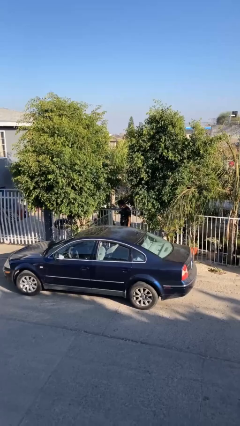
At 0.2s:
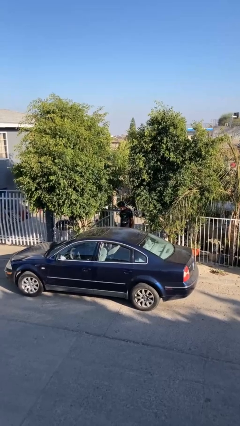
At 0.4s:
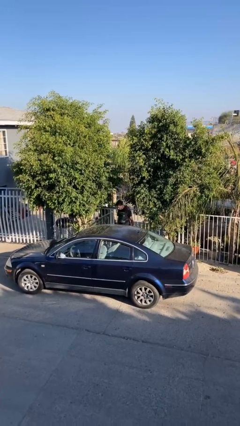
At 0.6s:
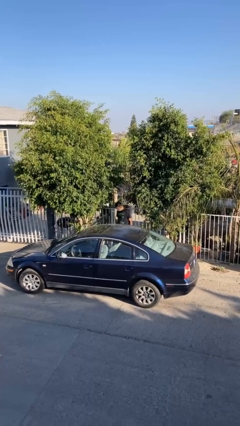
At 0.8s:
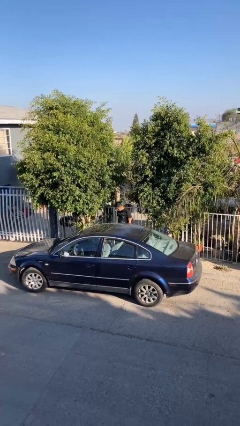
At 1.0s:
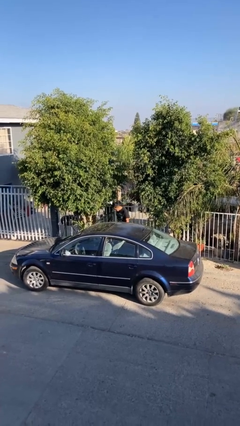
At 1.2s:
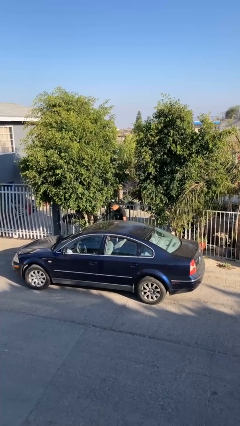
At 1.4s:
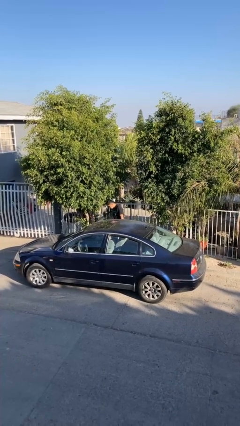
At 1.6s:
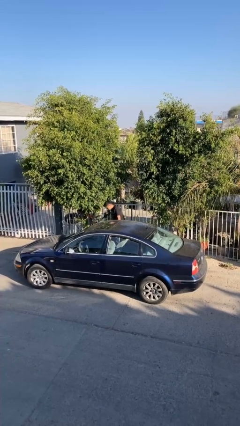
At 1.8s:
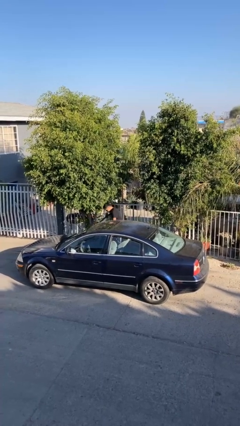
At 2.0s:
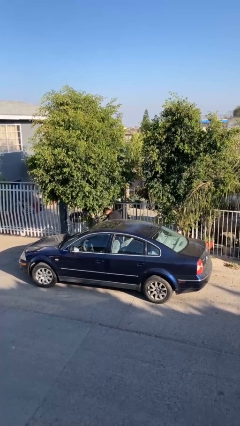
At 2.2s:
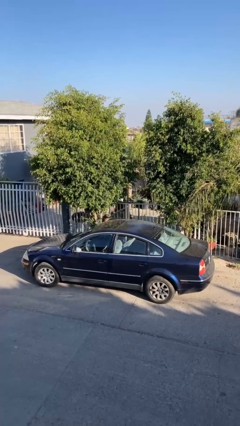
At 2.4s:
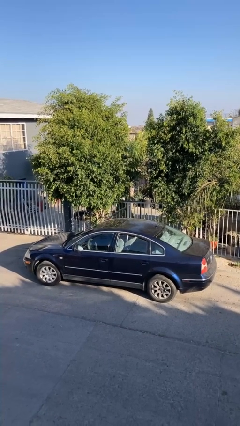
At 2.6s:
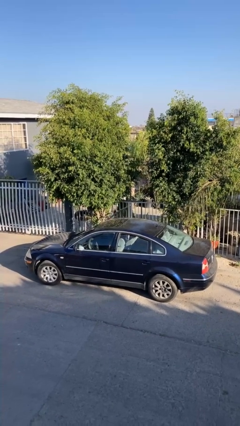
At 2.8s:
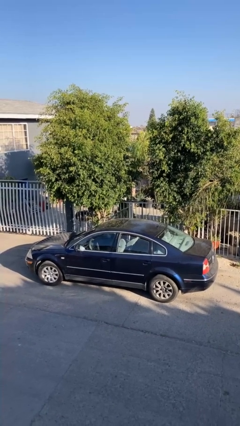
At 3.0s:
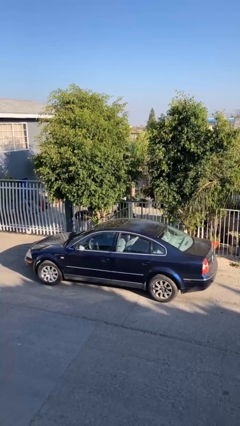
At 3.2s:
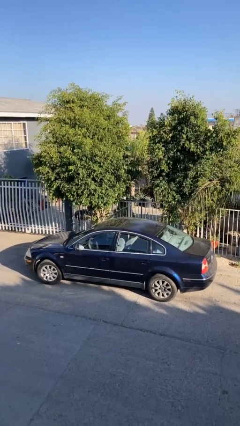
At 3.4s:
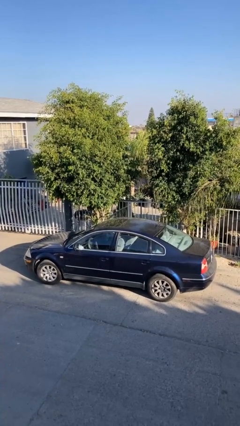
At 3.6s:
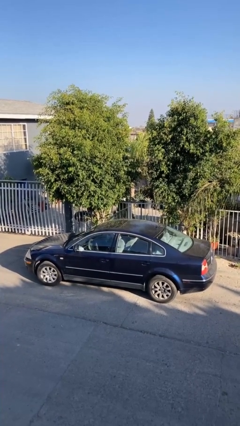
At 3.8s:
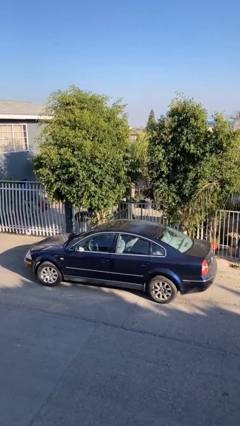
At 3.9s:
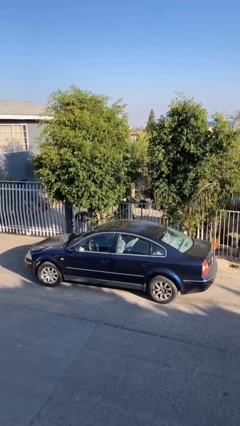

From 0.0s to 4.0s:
person enters car

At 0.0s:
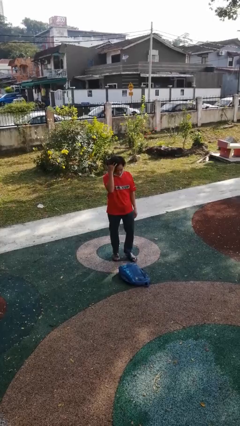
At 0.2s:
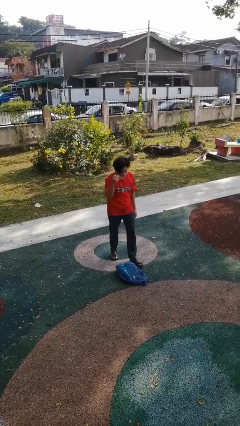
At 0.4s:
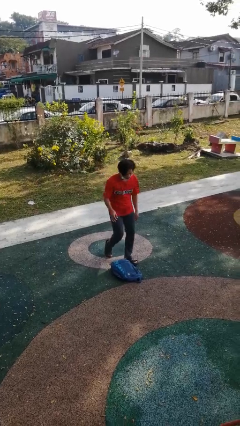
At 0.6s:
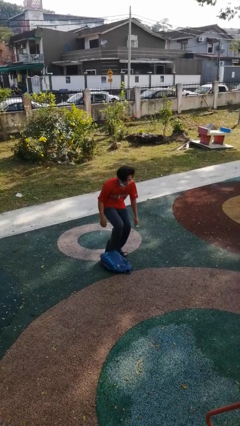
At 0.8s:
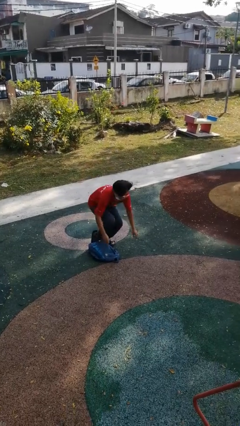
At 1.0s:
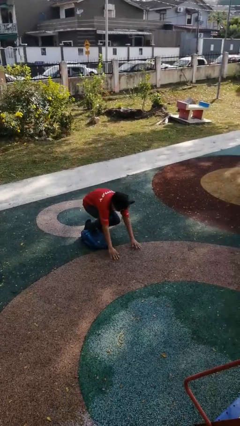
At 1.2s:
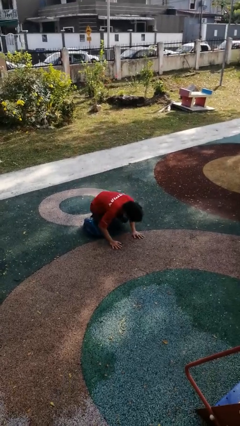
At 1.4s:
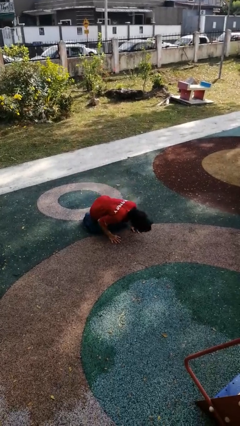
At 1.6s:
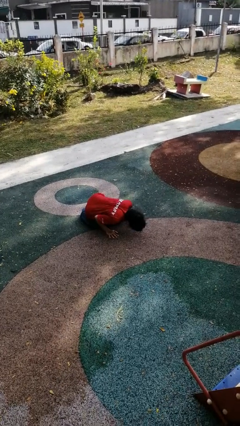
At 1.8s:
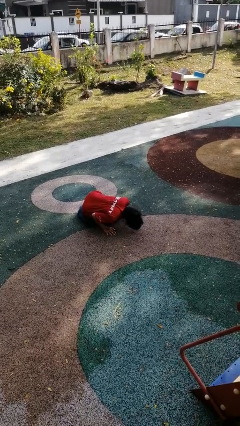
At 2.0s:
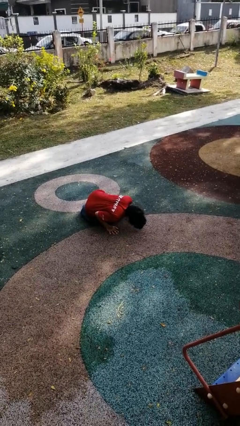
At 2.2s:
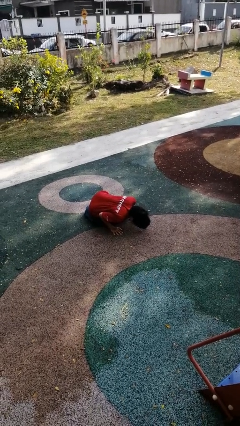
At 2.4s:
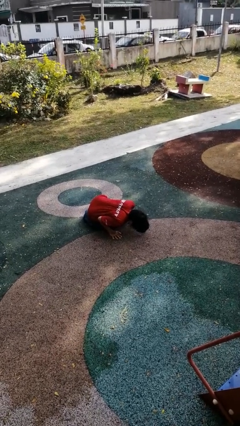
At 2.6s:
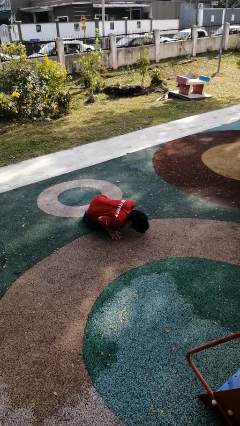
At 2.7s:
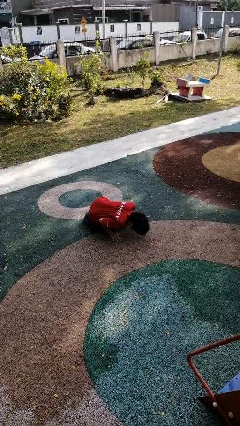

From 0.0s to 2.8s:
person trips on object on floor

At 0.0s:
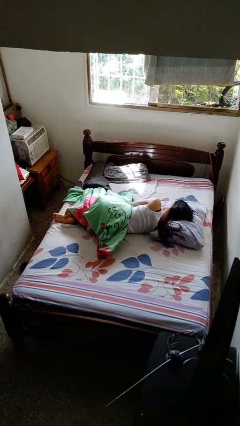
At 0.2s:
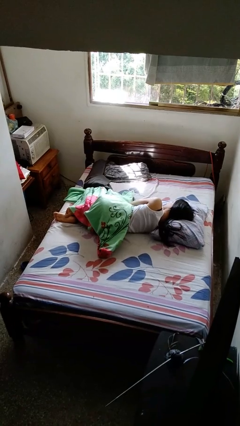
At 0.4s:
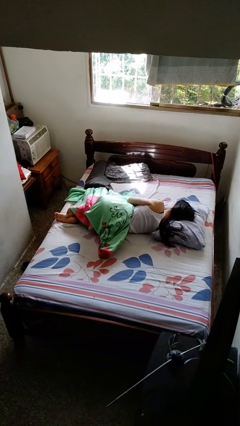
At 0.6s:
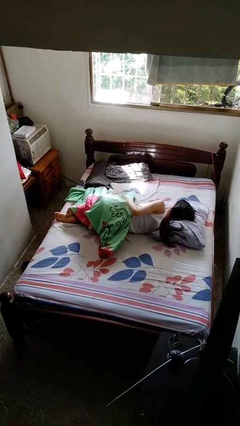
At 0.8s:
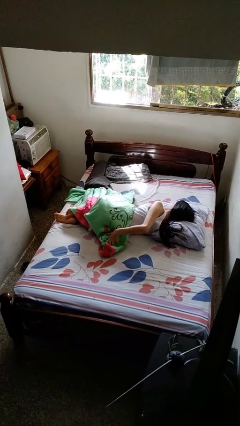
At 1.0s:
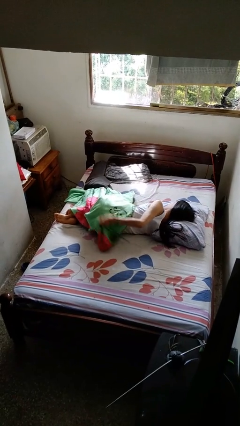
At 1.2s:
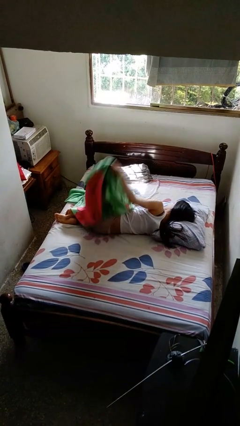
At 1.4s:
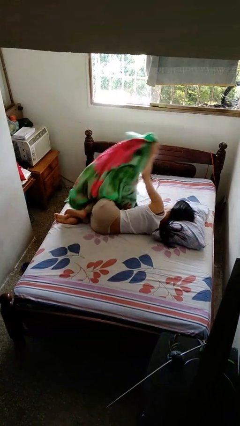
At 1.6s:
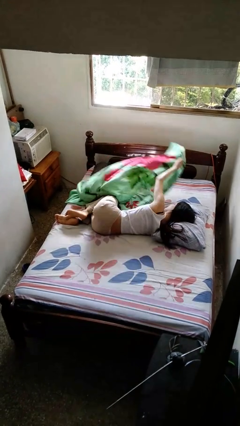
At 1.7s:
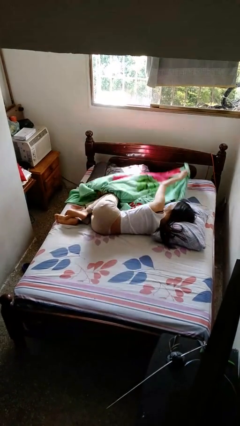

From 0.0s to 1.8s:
person uncovers with bedsheets

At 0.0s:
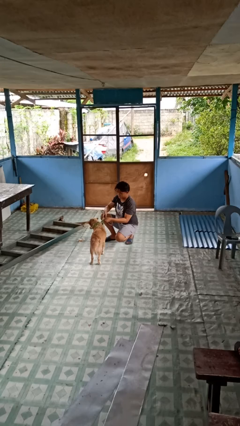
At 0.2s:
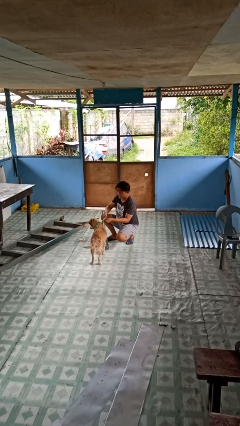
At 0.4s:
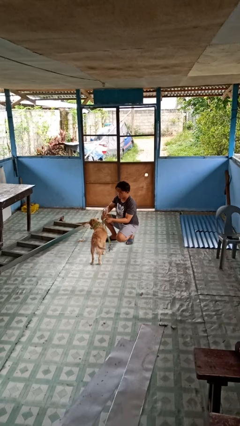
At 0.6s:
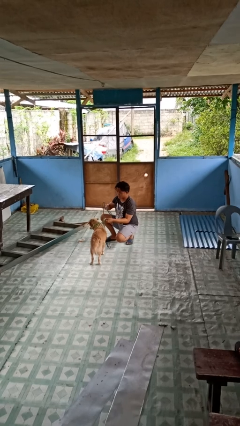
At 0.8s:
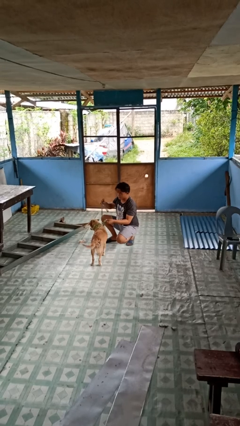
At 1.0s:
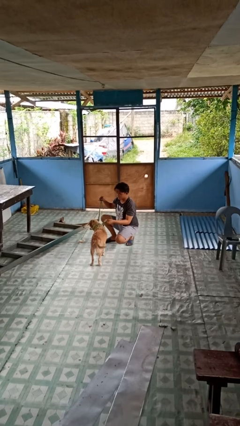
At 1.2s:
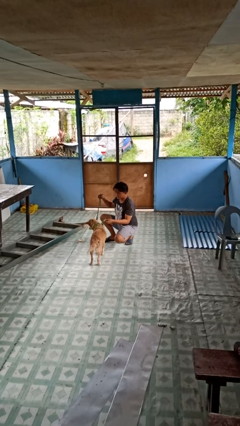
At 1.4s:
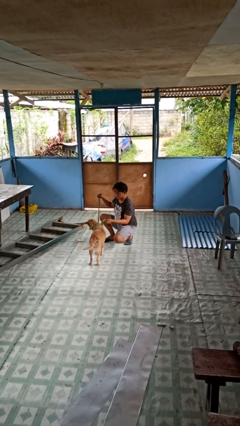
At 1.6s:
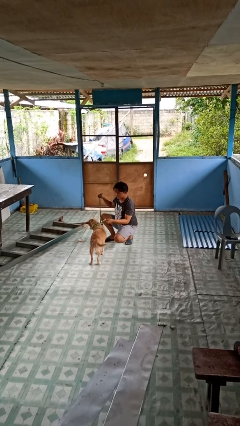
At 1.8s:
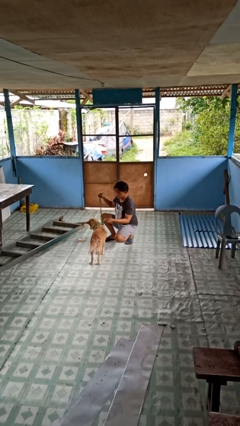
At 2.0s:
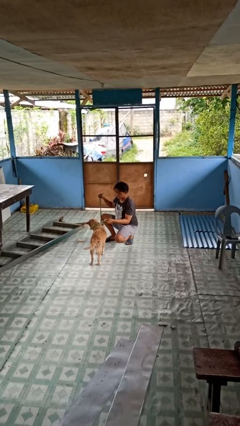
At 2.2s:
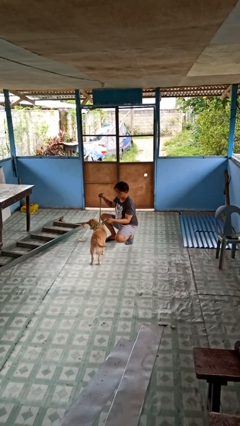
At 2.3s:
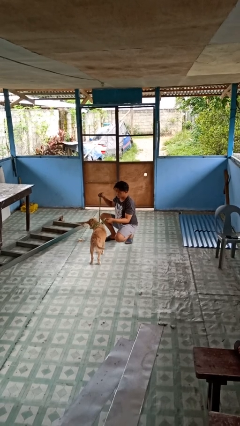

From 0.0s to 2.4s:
person unattaches leash from dog

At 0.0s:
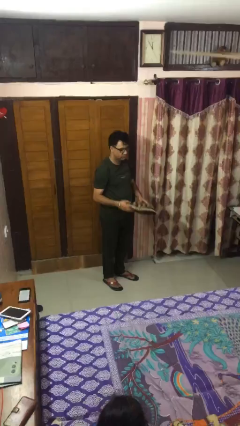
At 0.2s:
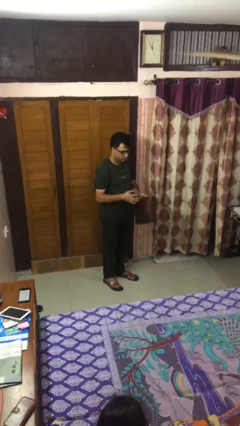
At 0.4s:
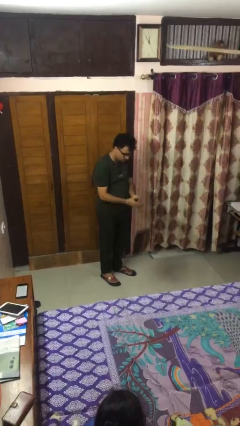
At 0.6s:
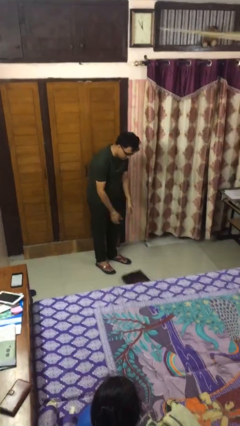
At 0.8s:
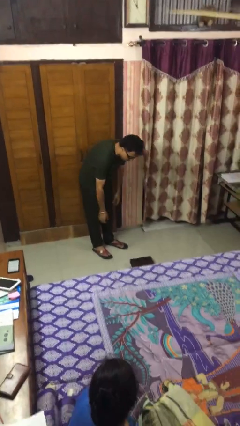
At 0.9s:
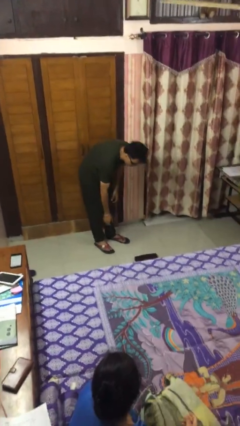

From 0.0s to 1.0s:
person drops object

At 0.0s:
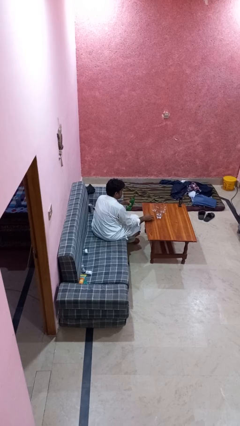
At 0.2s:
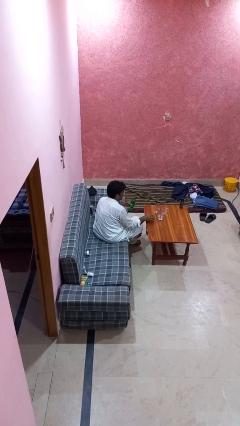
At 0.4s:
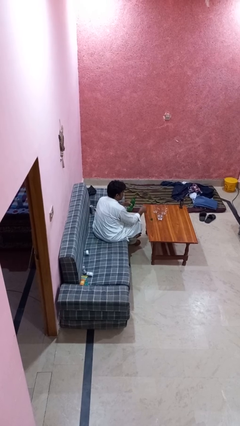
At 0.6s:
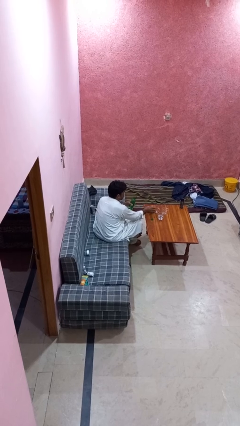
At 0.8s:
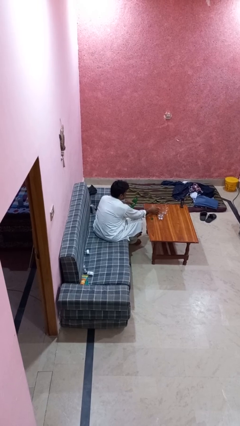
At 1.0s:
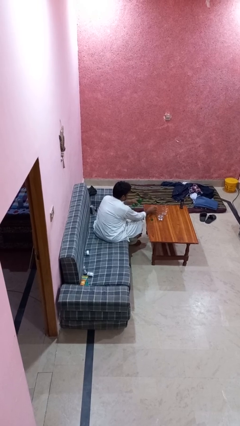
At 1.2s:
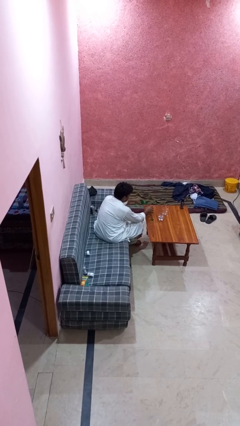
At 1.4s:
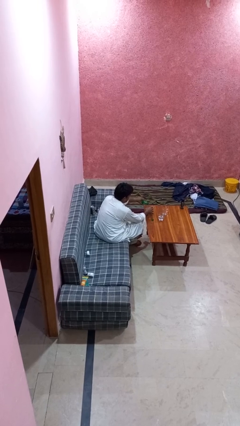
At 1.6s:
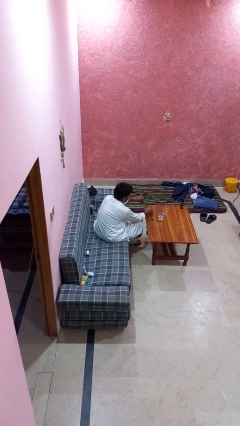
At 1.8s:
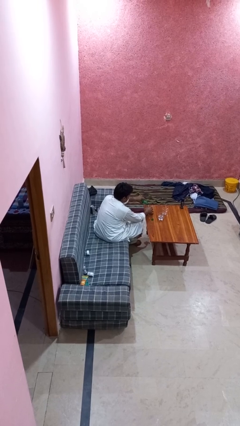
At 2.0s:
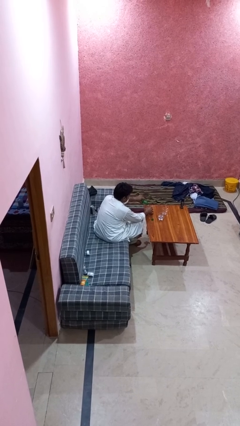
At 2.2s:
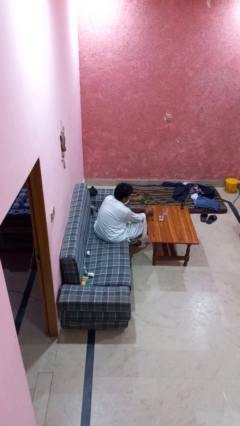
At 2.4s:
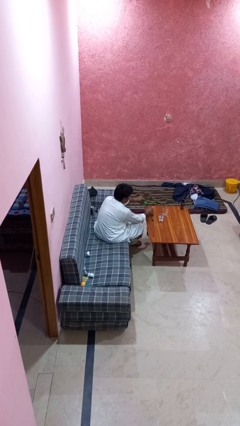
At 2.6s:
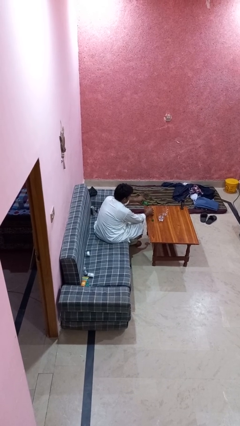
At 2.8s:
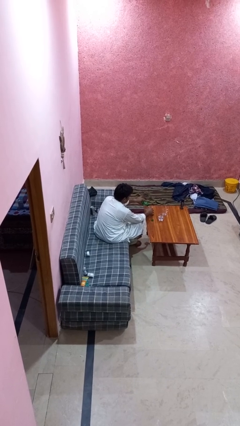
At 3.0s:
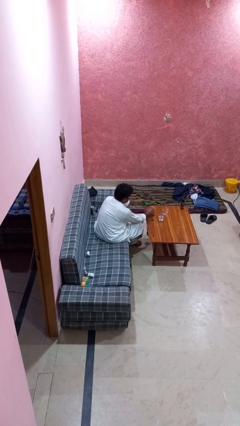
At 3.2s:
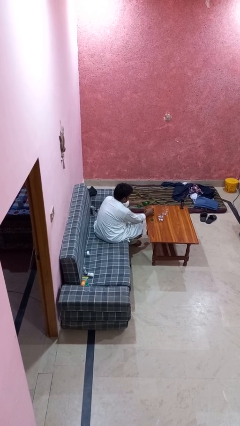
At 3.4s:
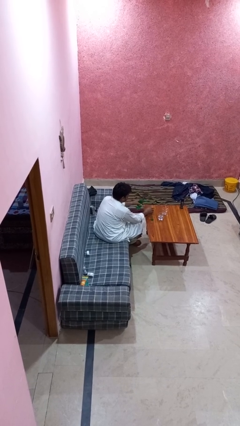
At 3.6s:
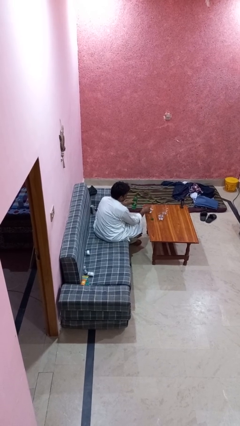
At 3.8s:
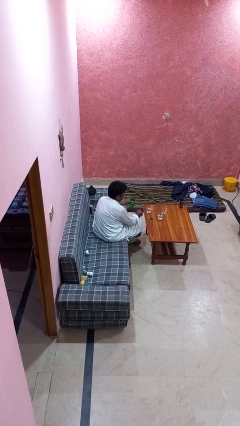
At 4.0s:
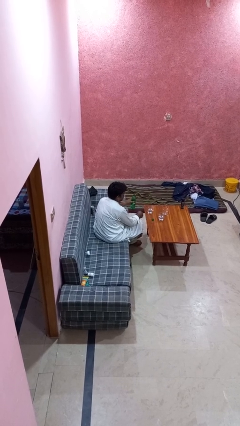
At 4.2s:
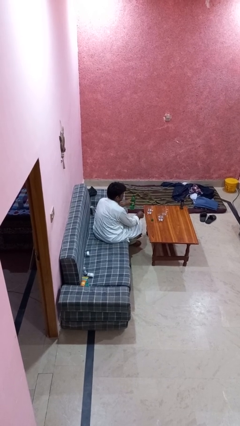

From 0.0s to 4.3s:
person pours liquid into cup

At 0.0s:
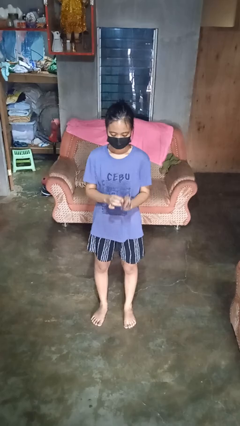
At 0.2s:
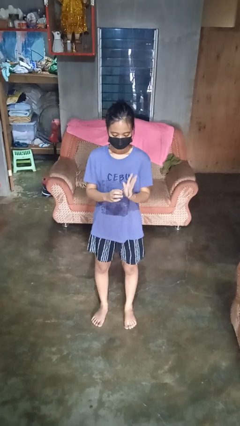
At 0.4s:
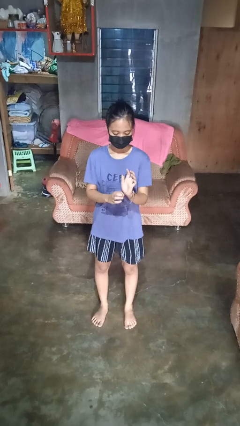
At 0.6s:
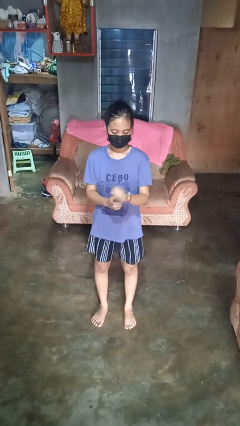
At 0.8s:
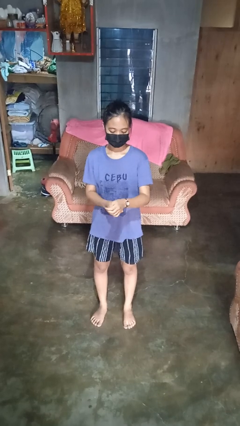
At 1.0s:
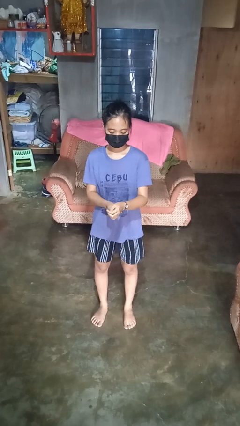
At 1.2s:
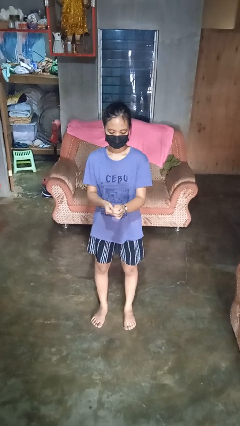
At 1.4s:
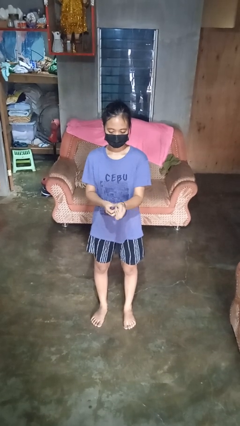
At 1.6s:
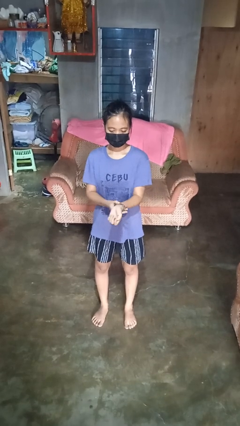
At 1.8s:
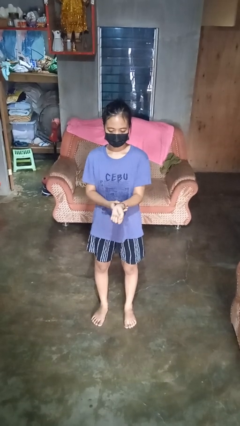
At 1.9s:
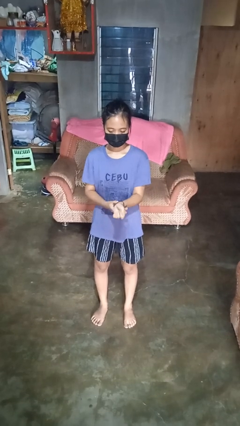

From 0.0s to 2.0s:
person puts on wristwatch
